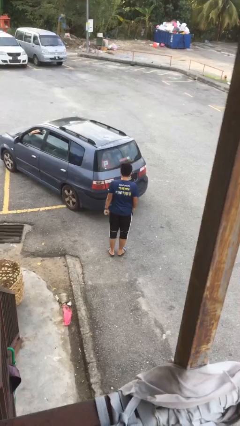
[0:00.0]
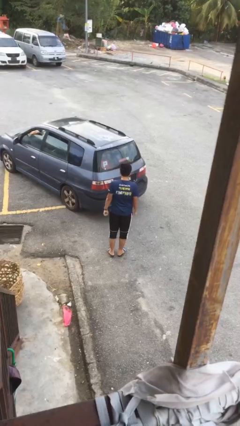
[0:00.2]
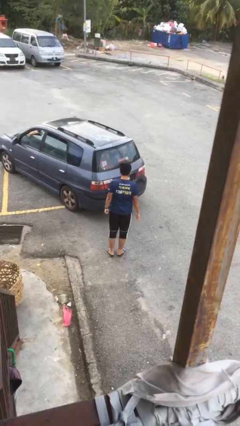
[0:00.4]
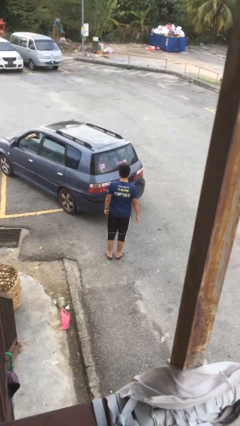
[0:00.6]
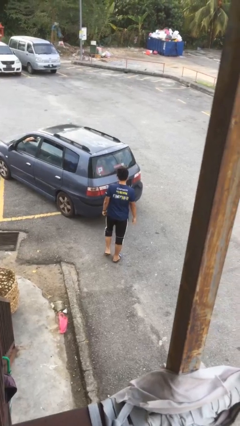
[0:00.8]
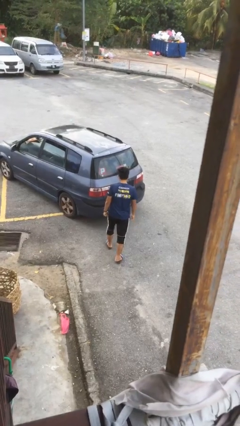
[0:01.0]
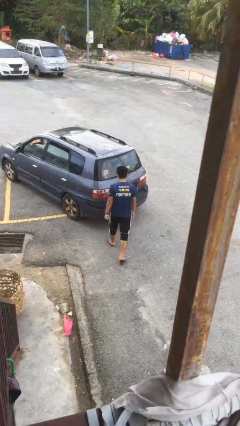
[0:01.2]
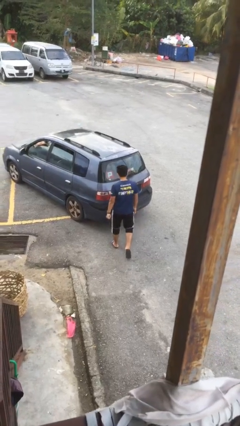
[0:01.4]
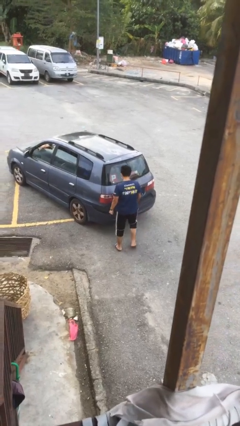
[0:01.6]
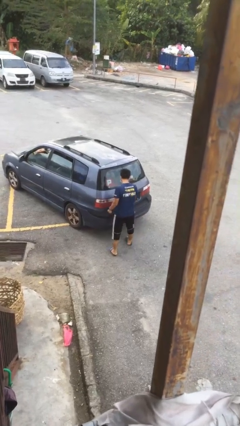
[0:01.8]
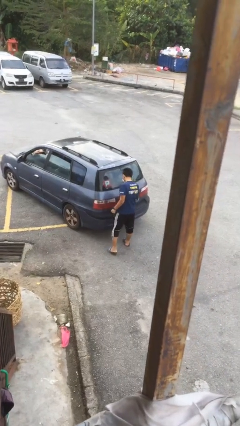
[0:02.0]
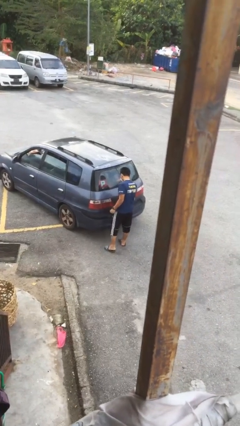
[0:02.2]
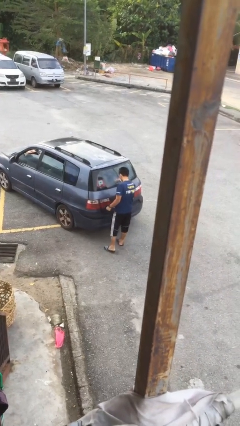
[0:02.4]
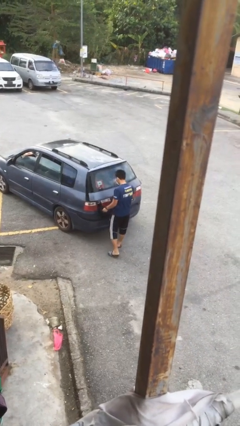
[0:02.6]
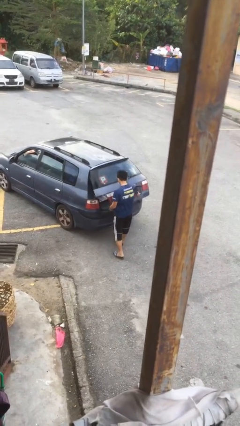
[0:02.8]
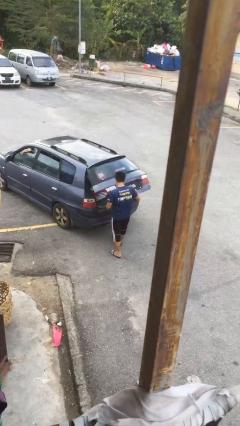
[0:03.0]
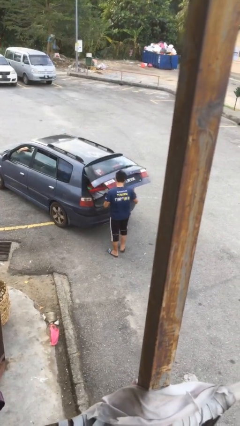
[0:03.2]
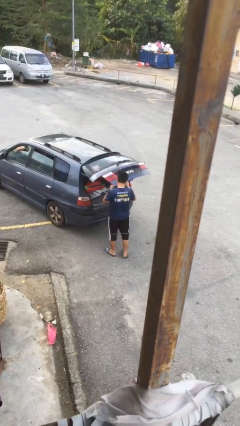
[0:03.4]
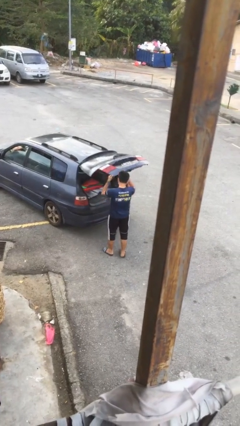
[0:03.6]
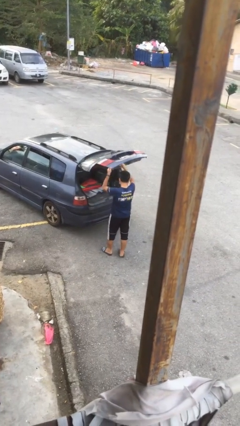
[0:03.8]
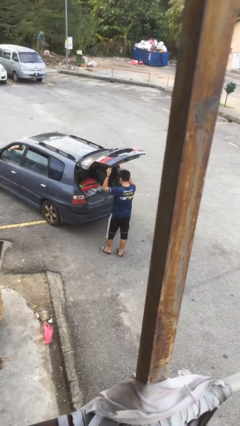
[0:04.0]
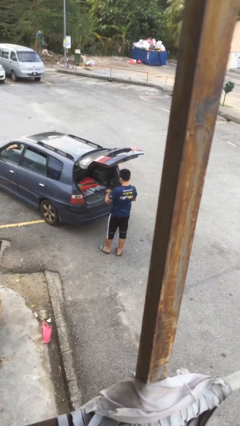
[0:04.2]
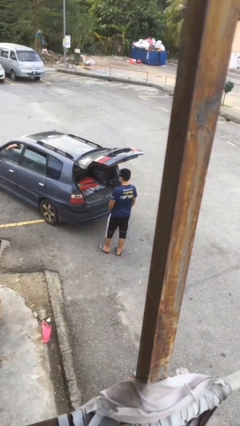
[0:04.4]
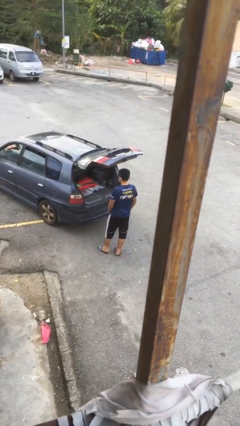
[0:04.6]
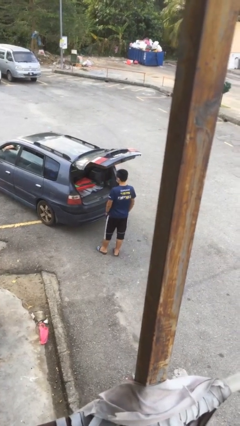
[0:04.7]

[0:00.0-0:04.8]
person opens car trunk

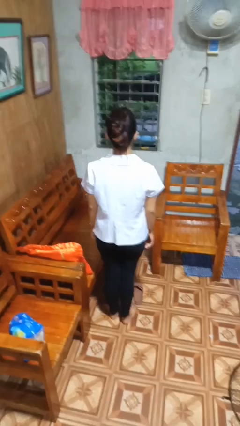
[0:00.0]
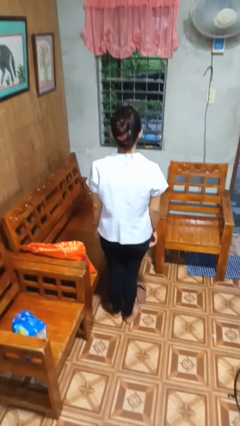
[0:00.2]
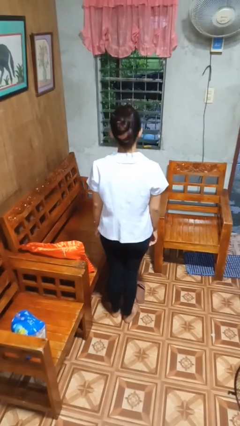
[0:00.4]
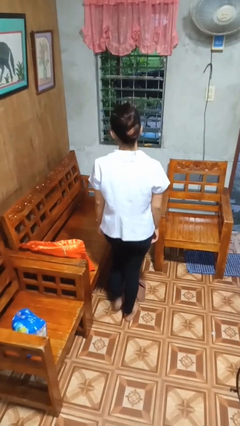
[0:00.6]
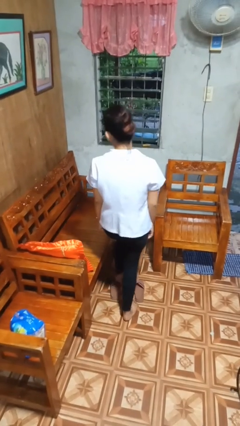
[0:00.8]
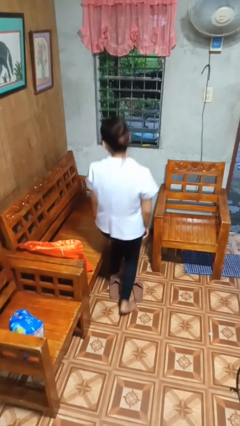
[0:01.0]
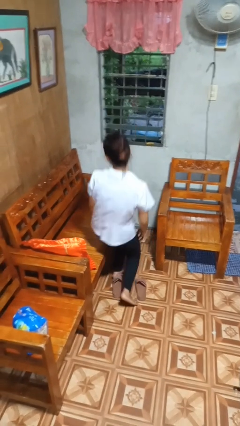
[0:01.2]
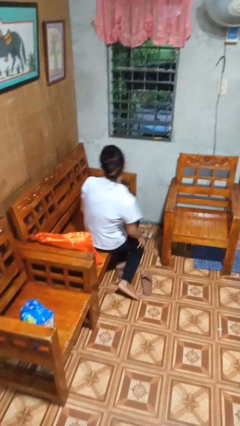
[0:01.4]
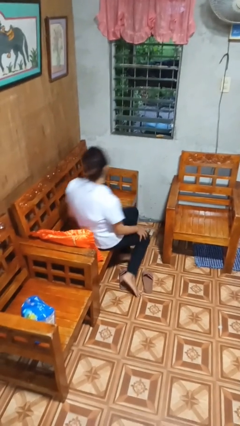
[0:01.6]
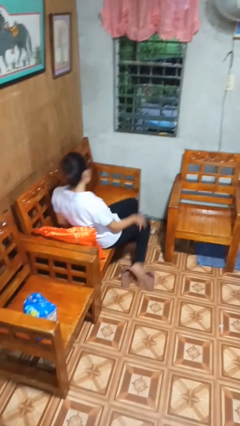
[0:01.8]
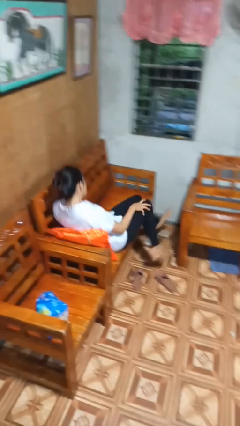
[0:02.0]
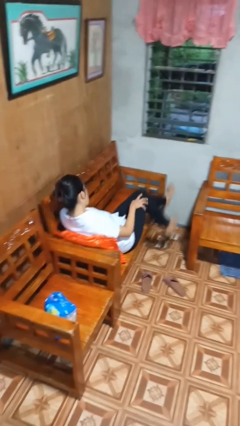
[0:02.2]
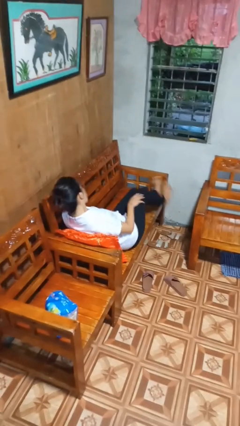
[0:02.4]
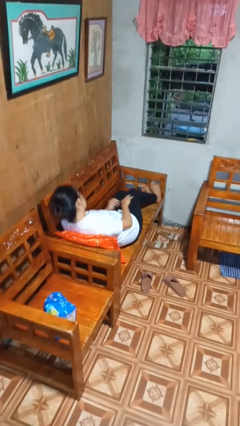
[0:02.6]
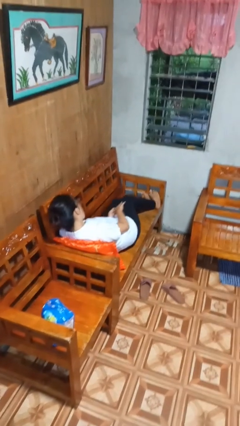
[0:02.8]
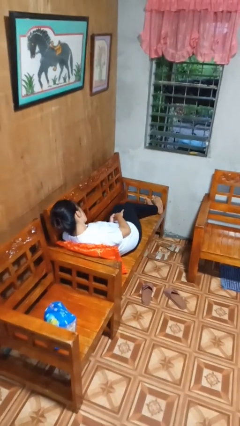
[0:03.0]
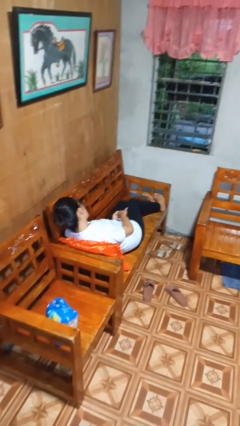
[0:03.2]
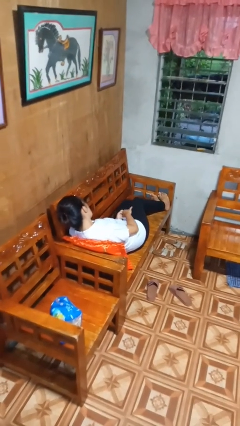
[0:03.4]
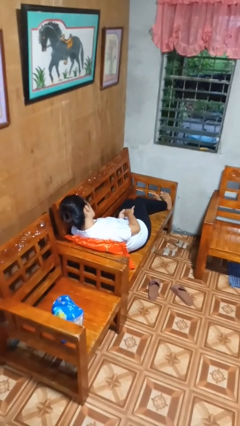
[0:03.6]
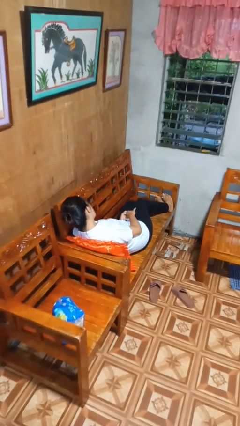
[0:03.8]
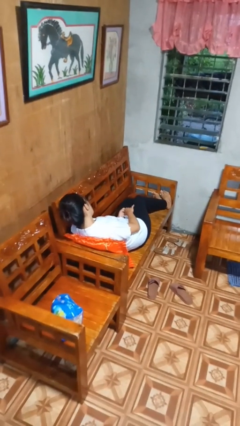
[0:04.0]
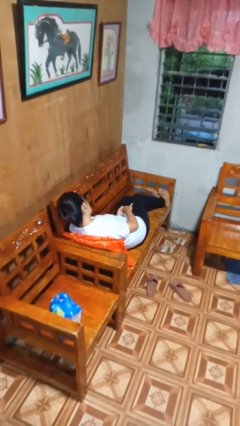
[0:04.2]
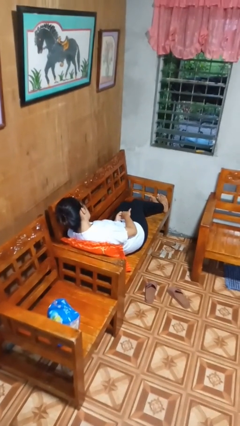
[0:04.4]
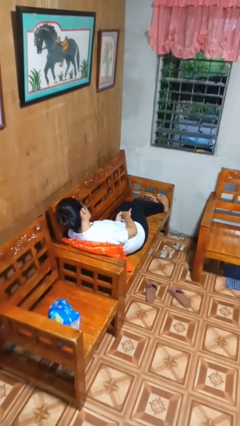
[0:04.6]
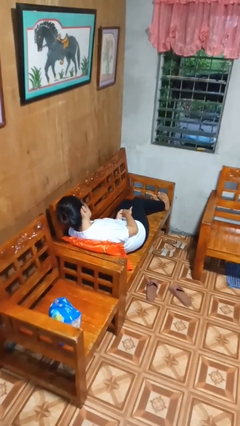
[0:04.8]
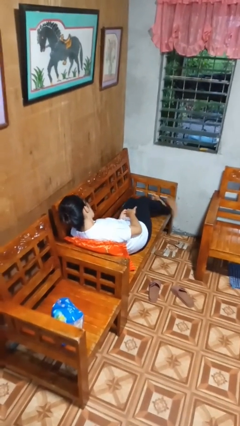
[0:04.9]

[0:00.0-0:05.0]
person lies down on couch

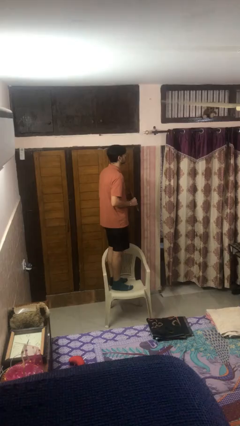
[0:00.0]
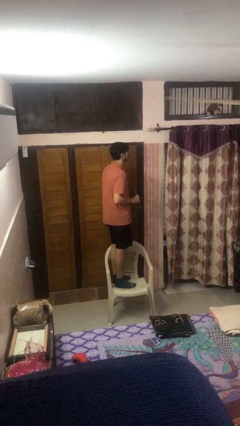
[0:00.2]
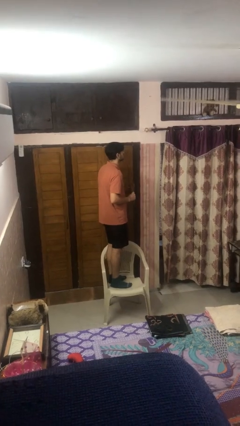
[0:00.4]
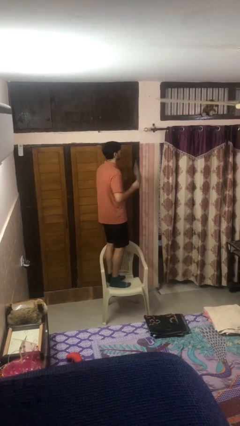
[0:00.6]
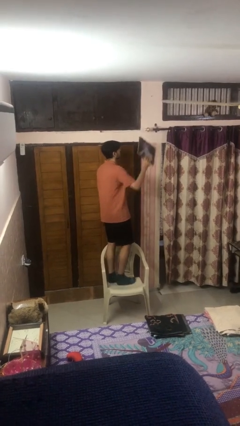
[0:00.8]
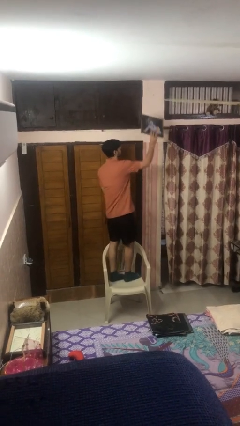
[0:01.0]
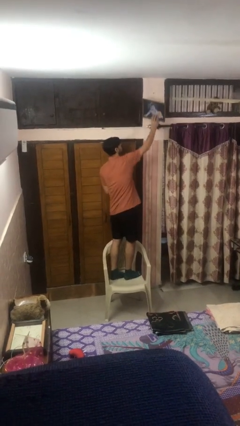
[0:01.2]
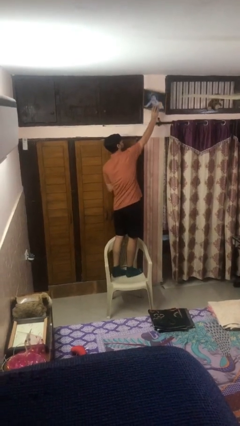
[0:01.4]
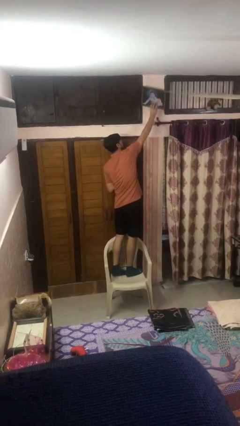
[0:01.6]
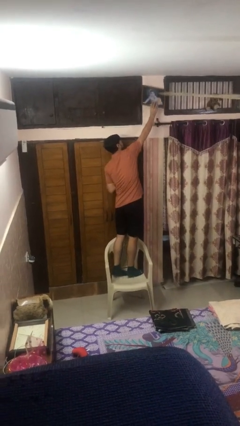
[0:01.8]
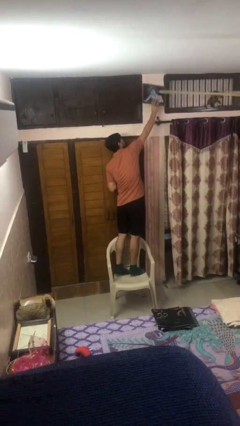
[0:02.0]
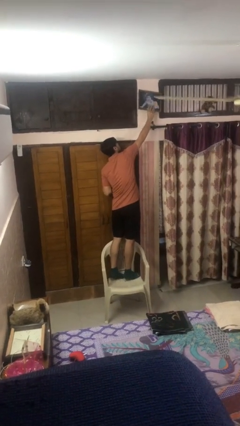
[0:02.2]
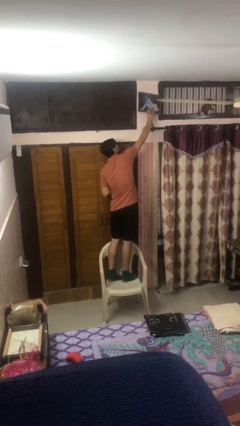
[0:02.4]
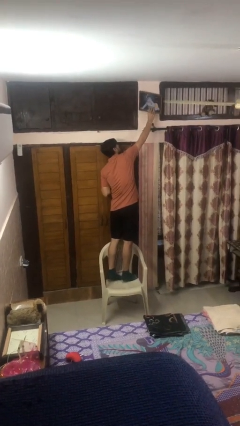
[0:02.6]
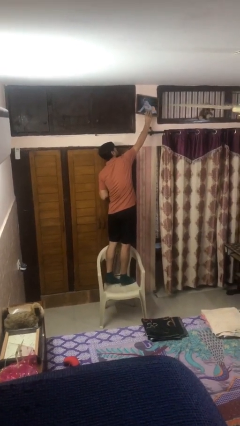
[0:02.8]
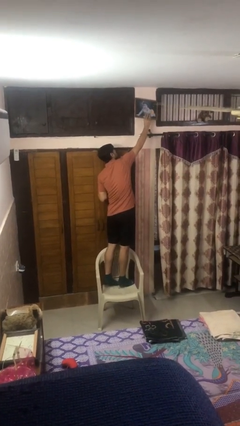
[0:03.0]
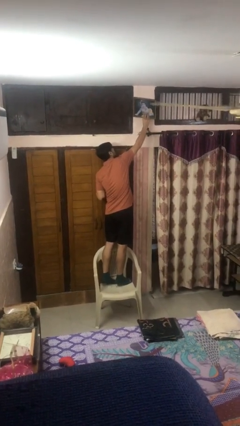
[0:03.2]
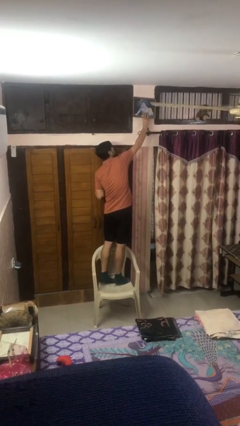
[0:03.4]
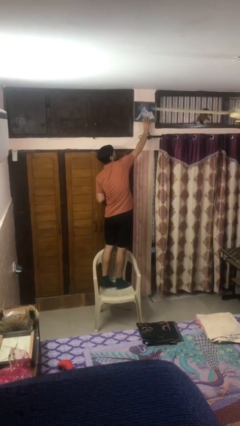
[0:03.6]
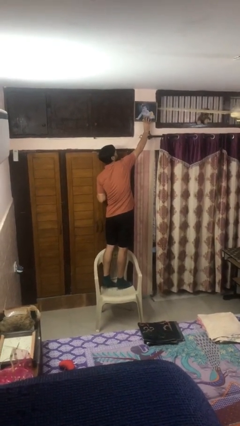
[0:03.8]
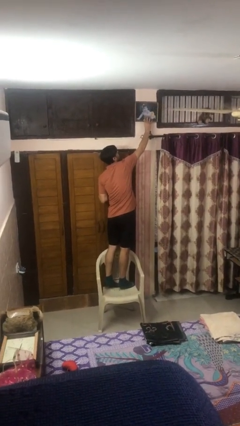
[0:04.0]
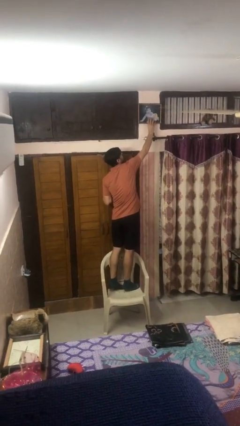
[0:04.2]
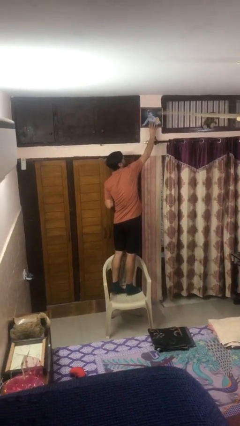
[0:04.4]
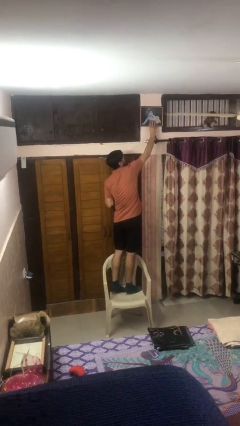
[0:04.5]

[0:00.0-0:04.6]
person puts up picture frame

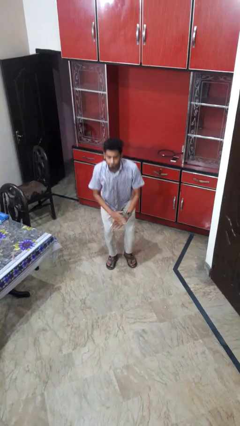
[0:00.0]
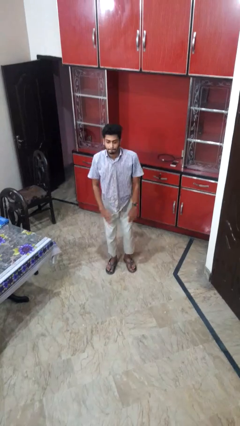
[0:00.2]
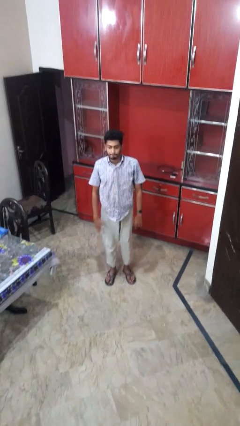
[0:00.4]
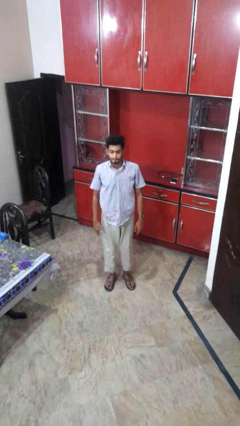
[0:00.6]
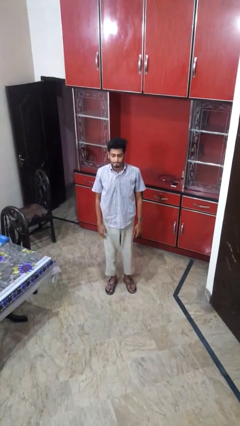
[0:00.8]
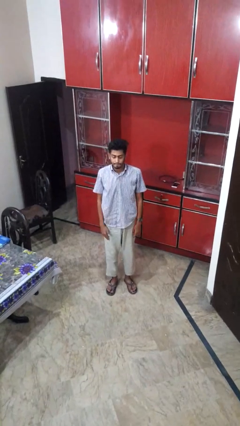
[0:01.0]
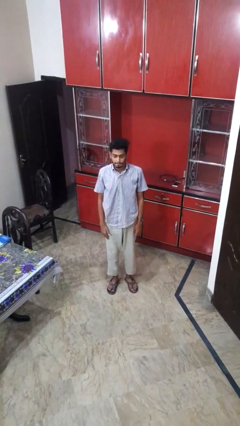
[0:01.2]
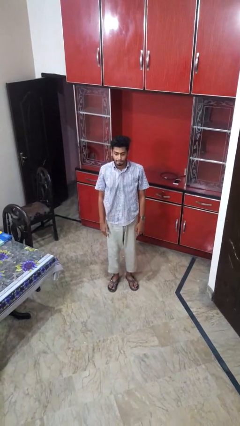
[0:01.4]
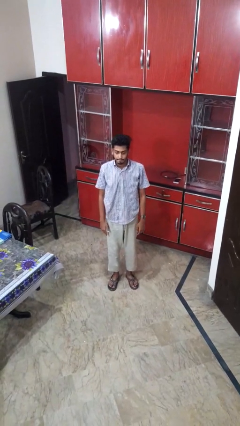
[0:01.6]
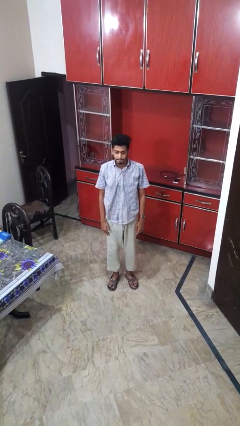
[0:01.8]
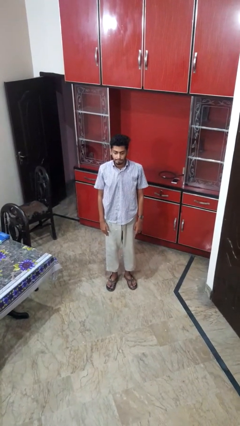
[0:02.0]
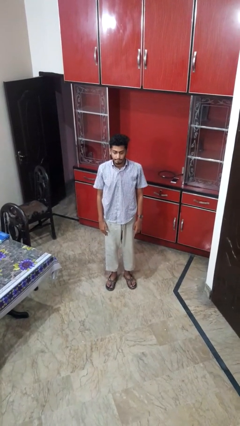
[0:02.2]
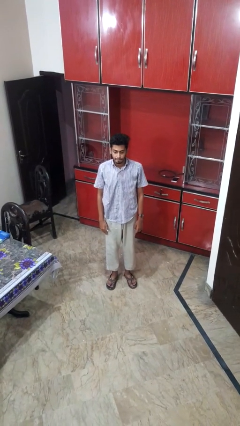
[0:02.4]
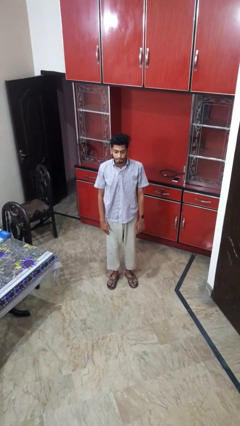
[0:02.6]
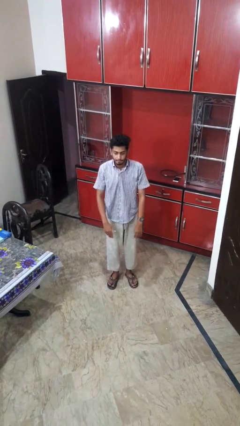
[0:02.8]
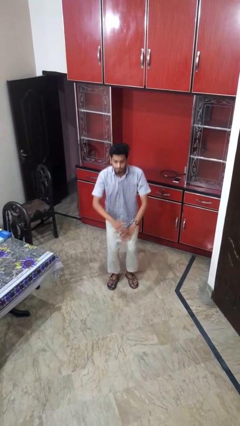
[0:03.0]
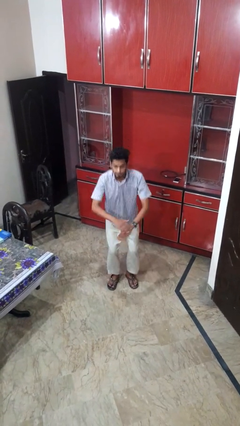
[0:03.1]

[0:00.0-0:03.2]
person stands up

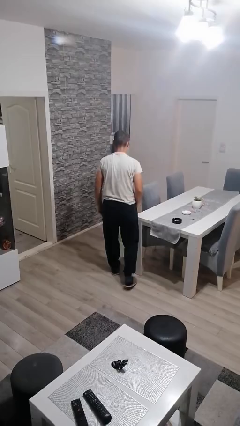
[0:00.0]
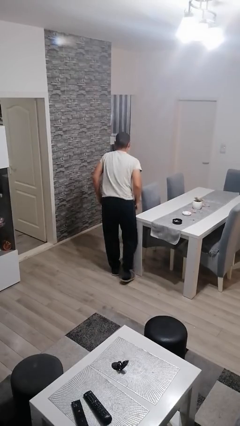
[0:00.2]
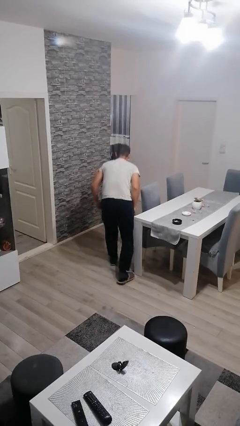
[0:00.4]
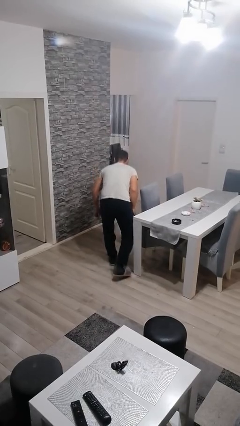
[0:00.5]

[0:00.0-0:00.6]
person bumps into table
